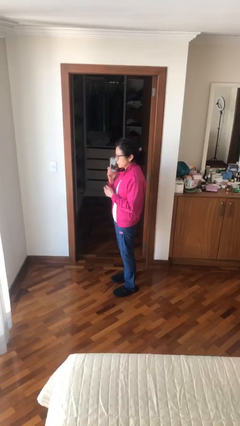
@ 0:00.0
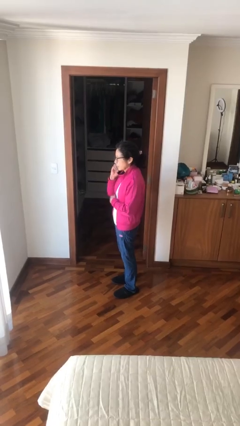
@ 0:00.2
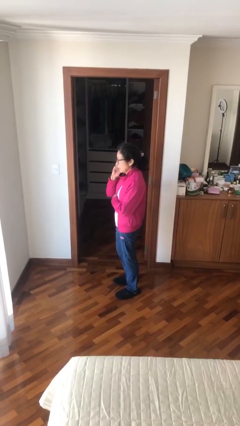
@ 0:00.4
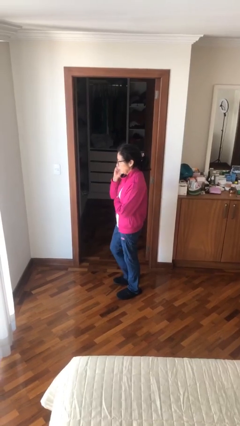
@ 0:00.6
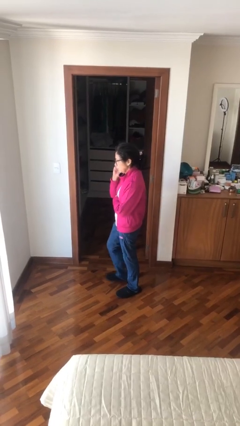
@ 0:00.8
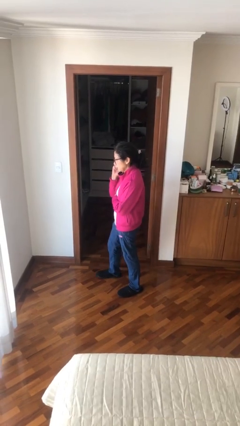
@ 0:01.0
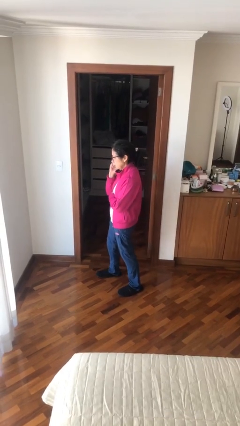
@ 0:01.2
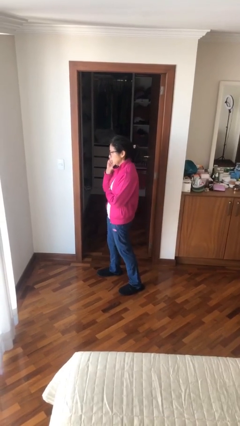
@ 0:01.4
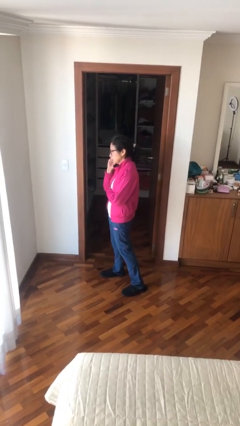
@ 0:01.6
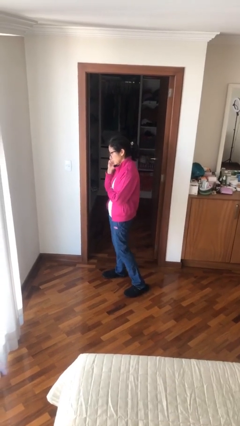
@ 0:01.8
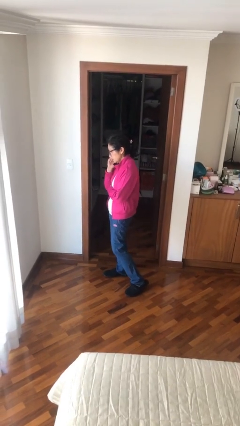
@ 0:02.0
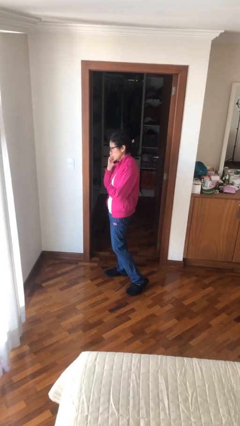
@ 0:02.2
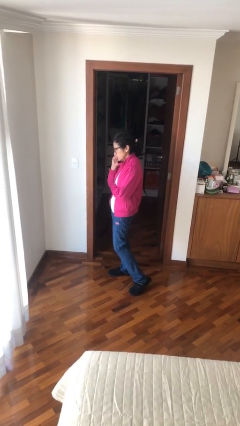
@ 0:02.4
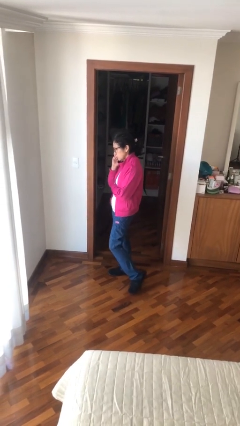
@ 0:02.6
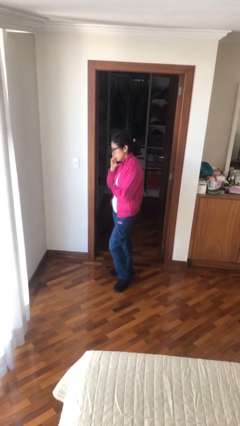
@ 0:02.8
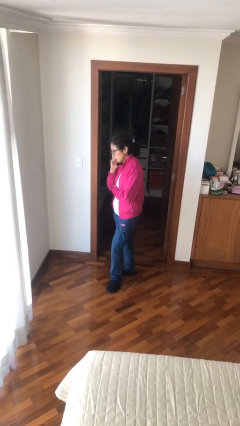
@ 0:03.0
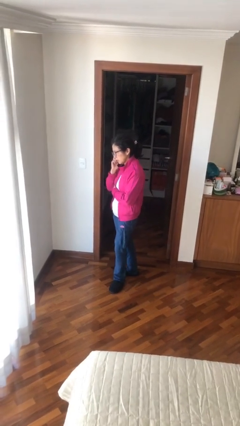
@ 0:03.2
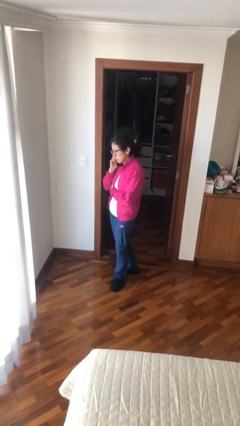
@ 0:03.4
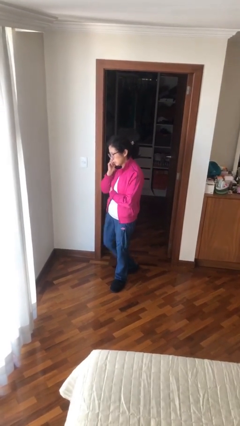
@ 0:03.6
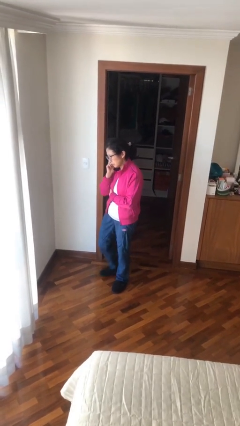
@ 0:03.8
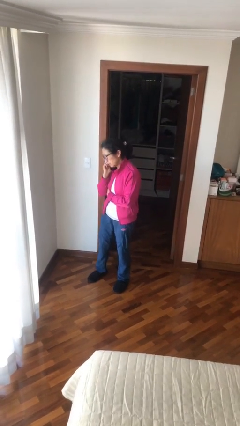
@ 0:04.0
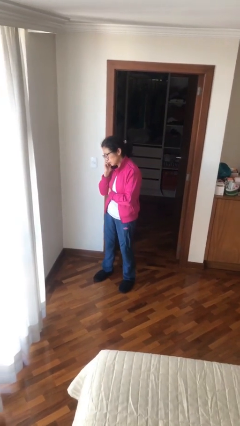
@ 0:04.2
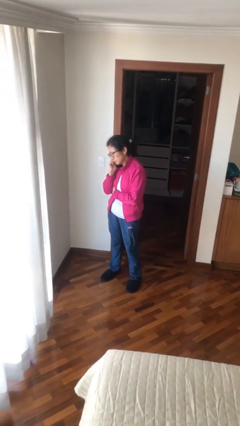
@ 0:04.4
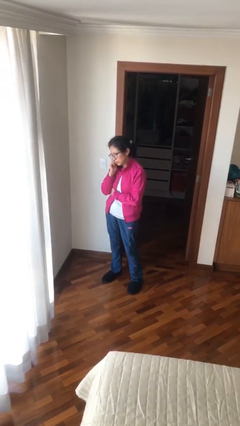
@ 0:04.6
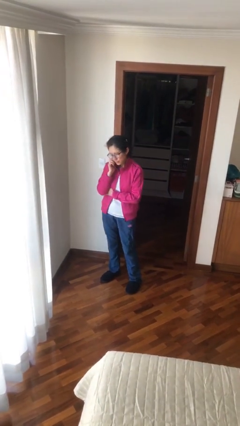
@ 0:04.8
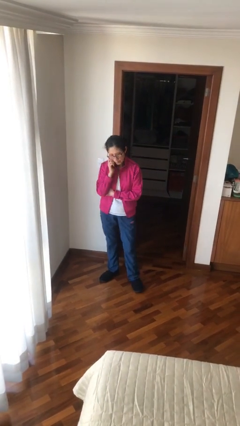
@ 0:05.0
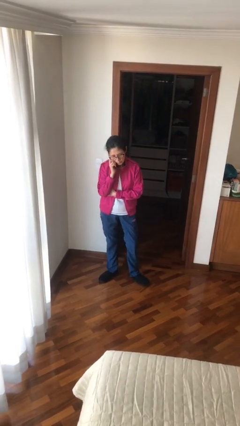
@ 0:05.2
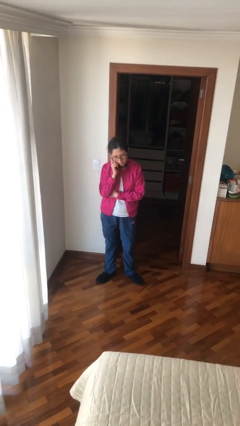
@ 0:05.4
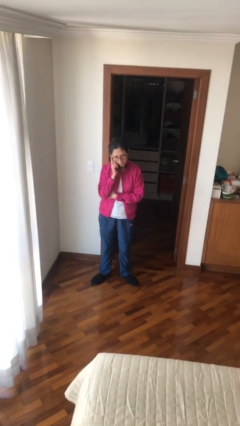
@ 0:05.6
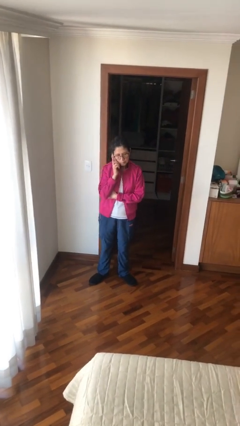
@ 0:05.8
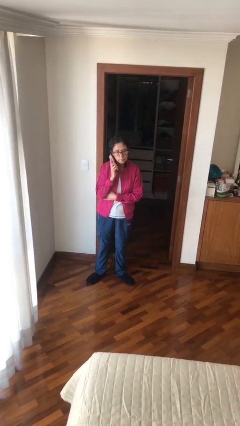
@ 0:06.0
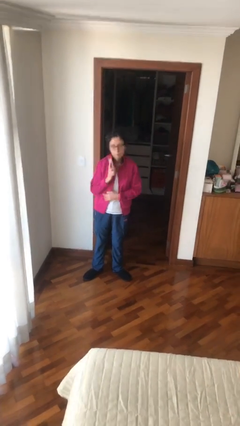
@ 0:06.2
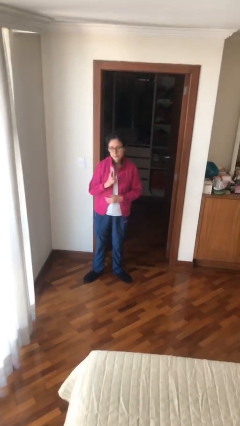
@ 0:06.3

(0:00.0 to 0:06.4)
person talks on phone

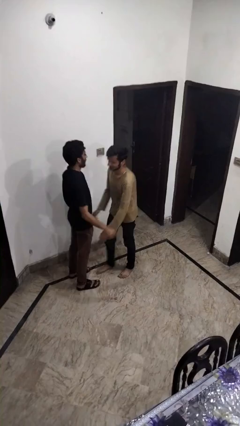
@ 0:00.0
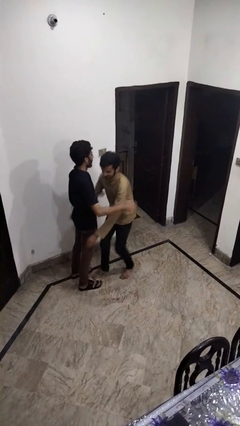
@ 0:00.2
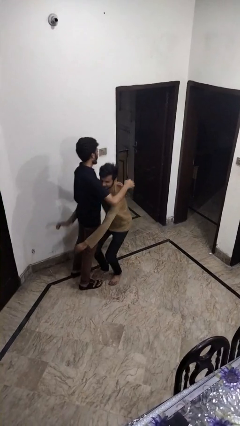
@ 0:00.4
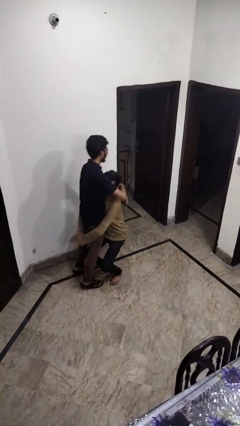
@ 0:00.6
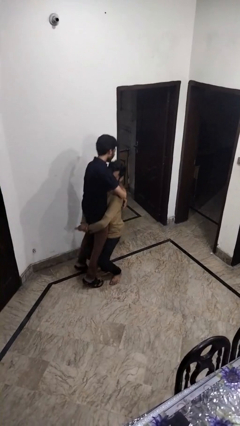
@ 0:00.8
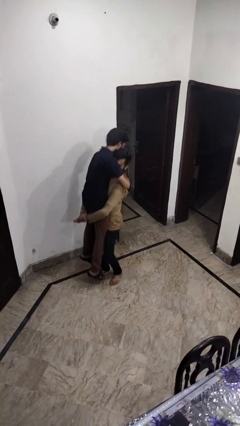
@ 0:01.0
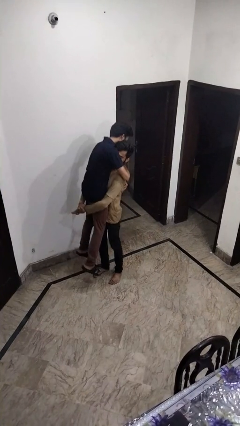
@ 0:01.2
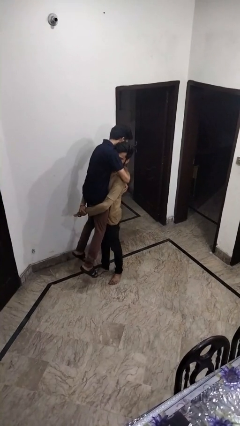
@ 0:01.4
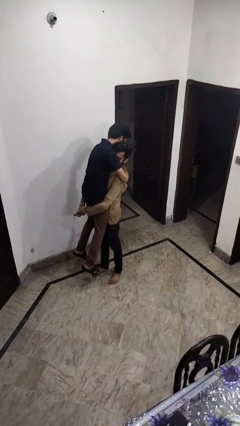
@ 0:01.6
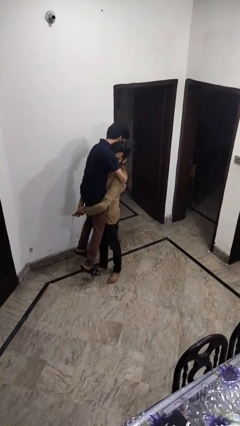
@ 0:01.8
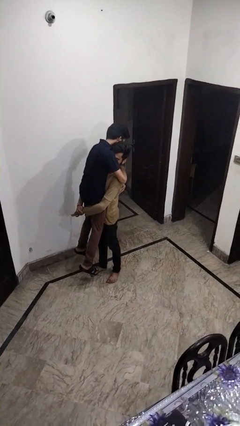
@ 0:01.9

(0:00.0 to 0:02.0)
person picks up person

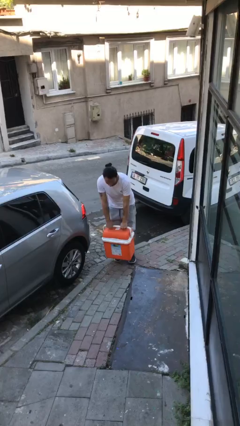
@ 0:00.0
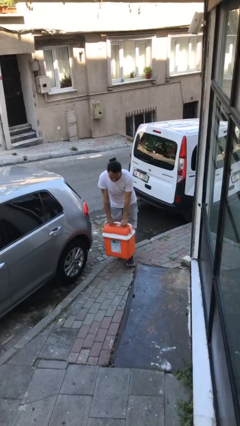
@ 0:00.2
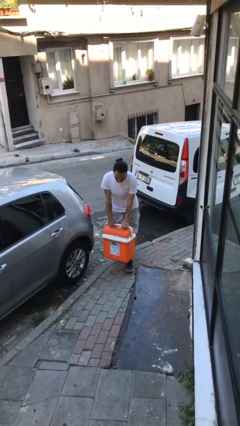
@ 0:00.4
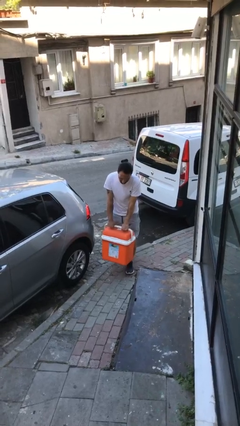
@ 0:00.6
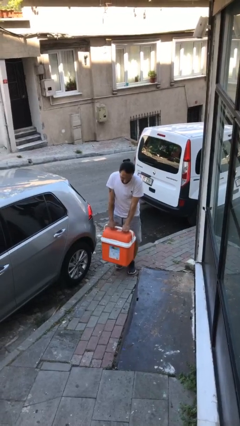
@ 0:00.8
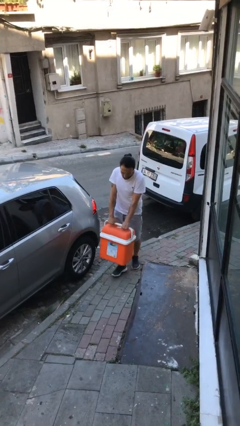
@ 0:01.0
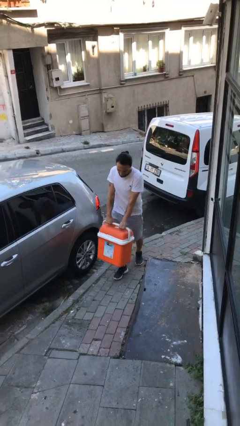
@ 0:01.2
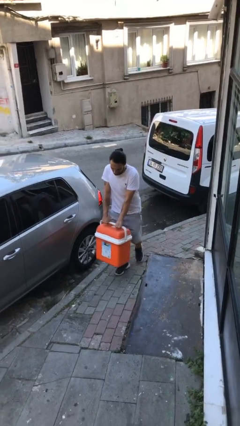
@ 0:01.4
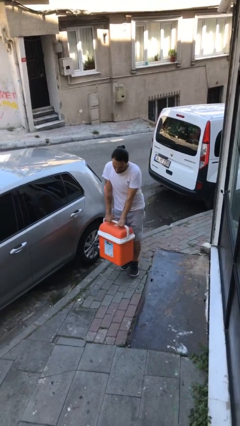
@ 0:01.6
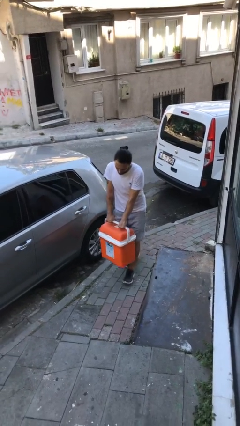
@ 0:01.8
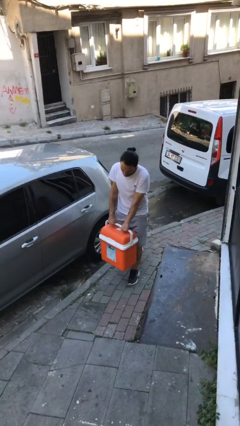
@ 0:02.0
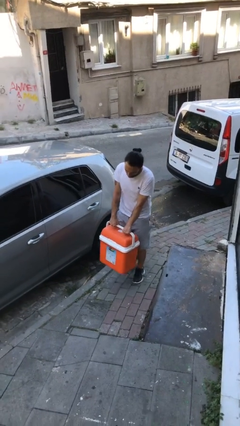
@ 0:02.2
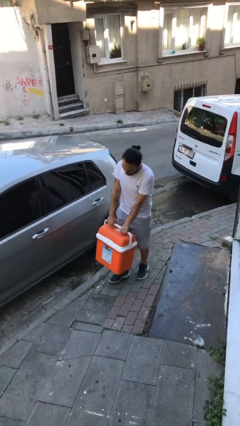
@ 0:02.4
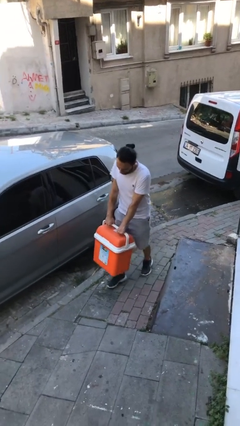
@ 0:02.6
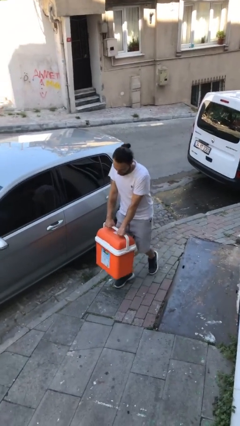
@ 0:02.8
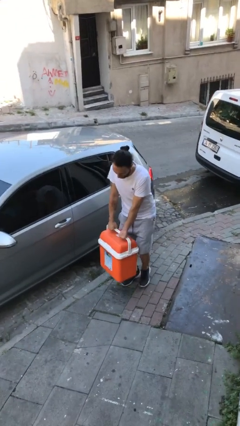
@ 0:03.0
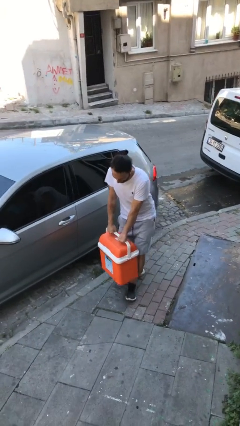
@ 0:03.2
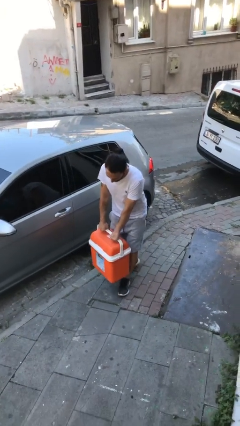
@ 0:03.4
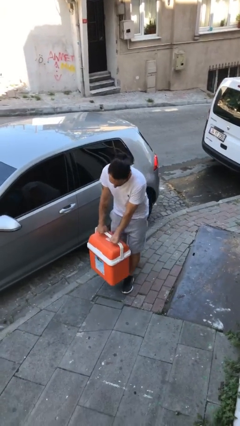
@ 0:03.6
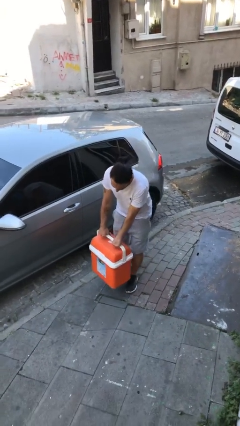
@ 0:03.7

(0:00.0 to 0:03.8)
person carries heavy object

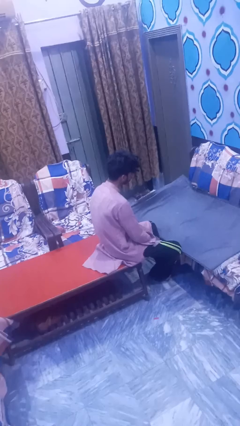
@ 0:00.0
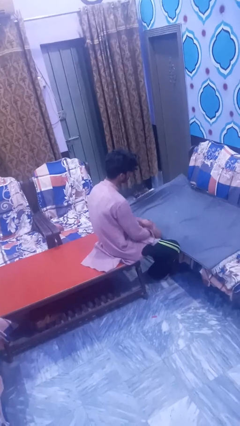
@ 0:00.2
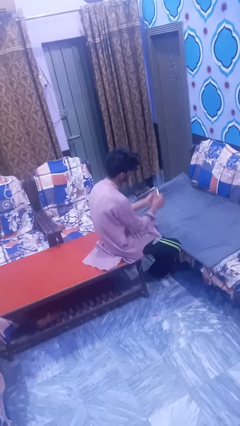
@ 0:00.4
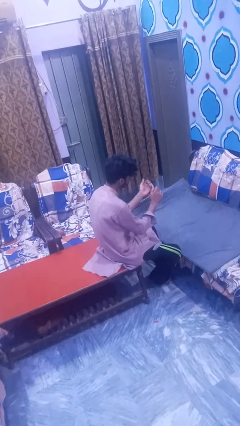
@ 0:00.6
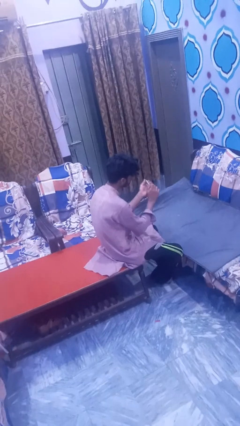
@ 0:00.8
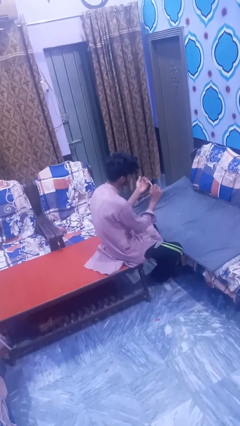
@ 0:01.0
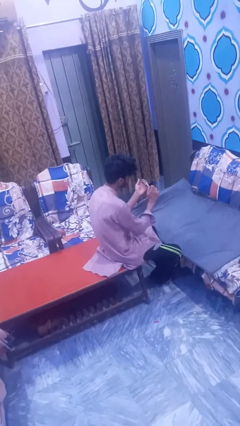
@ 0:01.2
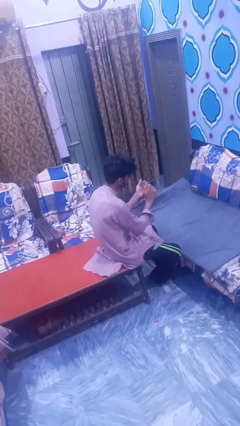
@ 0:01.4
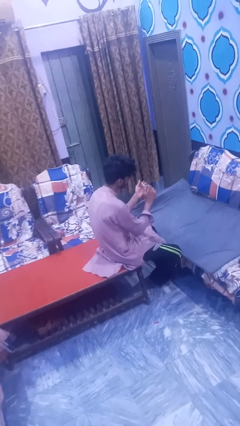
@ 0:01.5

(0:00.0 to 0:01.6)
person files fingernails

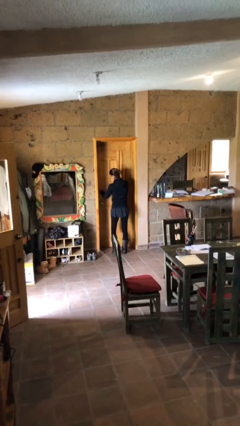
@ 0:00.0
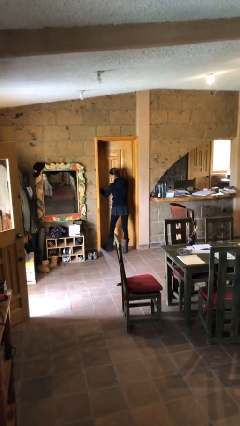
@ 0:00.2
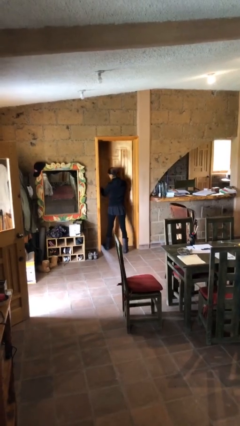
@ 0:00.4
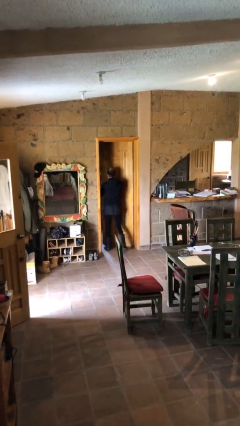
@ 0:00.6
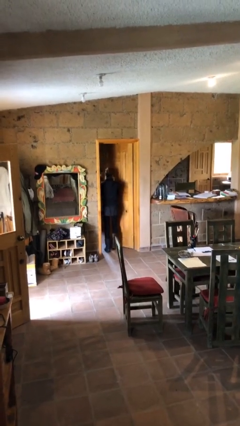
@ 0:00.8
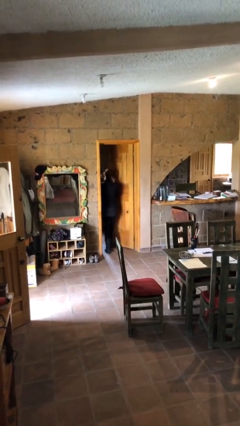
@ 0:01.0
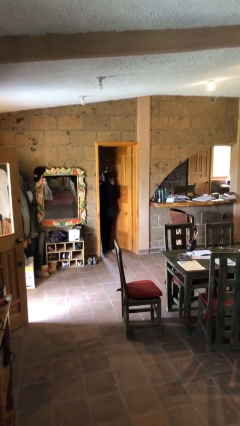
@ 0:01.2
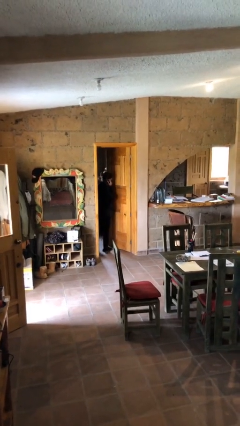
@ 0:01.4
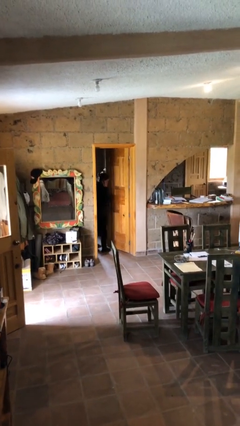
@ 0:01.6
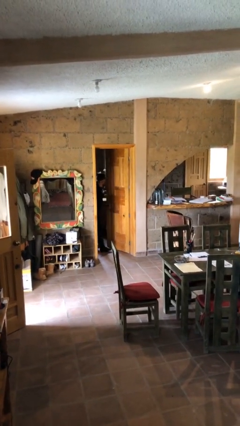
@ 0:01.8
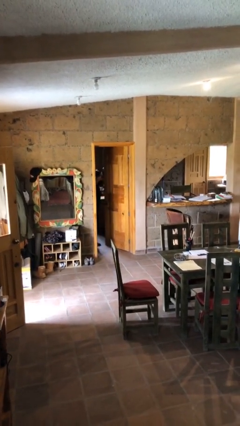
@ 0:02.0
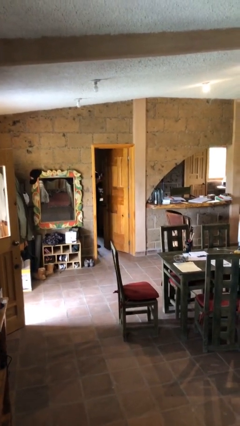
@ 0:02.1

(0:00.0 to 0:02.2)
person exits scene through structure

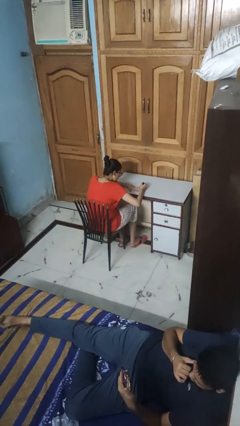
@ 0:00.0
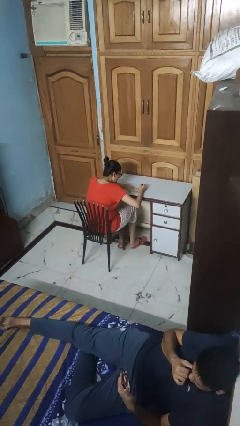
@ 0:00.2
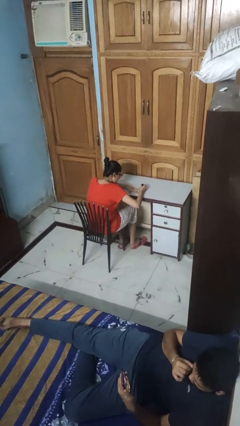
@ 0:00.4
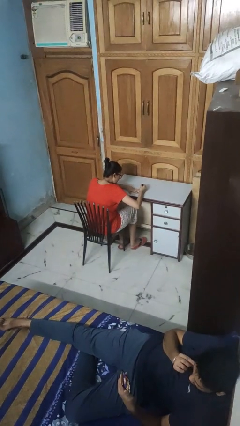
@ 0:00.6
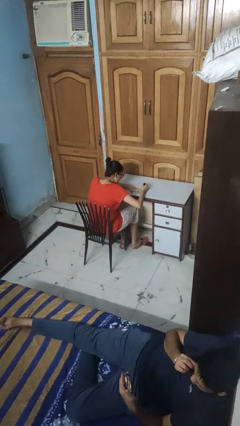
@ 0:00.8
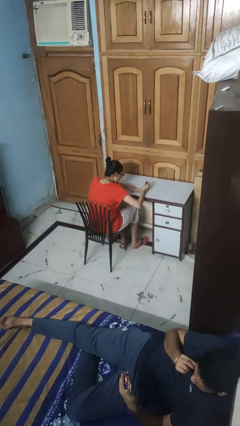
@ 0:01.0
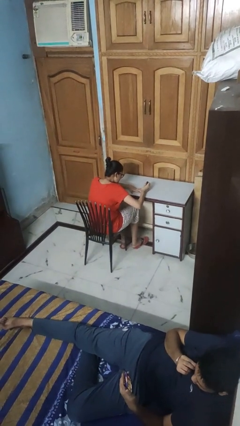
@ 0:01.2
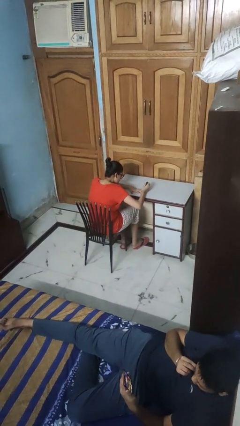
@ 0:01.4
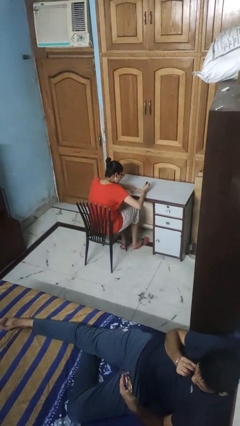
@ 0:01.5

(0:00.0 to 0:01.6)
person paints fingernails
